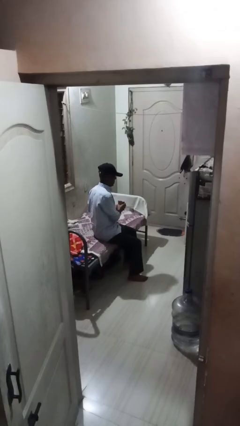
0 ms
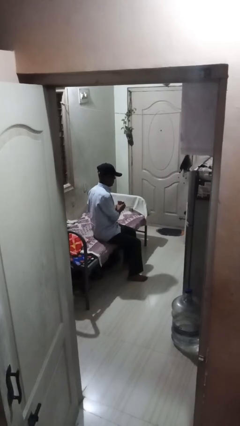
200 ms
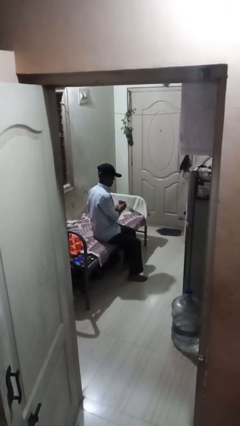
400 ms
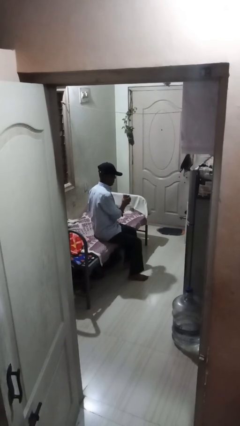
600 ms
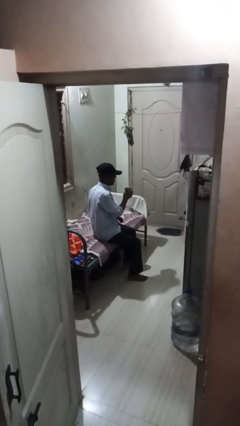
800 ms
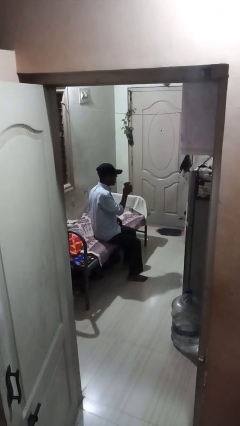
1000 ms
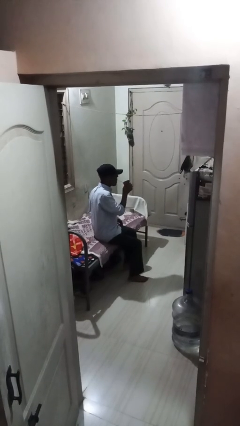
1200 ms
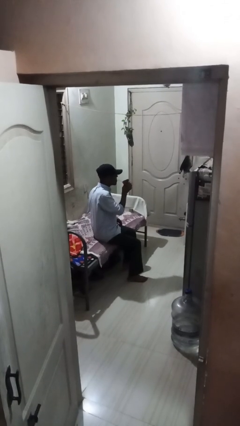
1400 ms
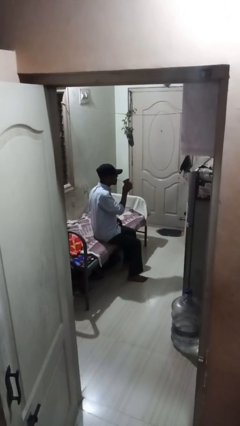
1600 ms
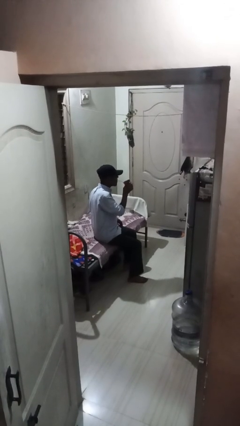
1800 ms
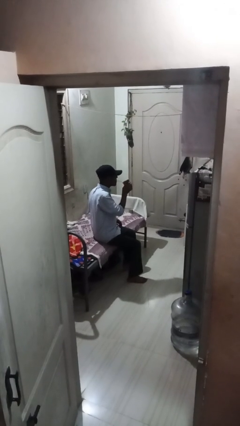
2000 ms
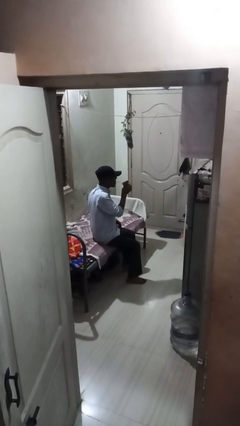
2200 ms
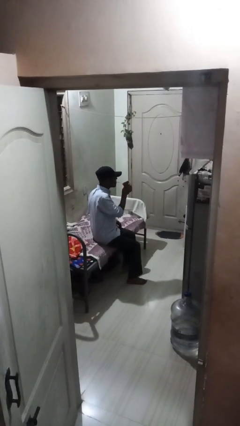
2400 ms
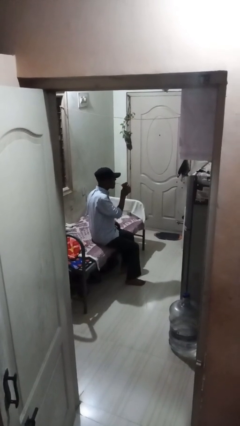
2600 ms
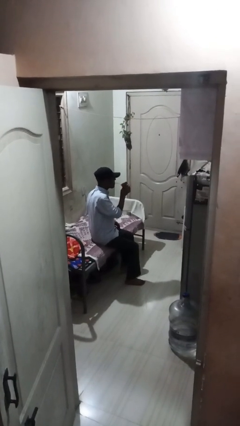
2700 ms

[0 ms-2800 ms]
person drinks from straw

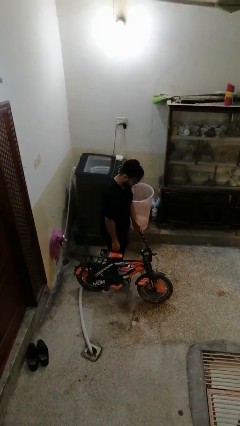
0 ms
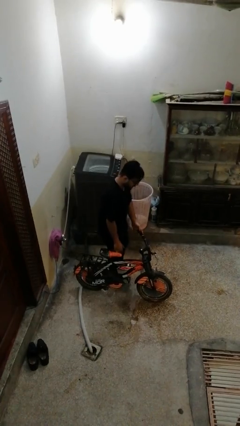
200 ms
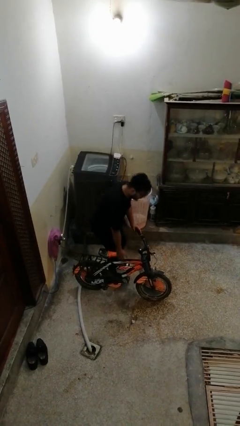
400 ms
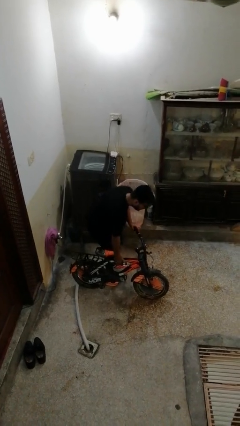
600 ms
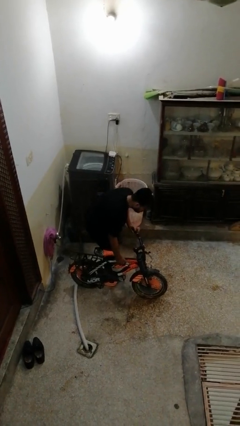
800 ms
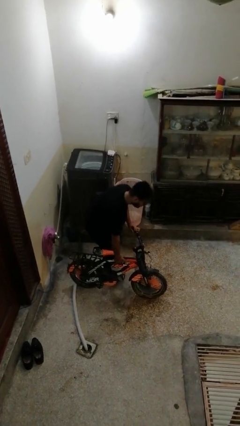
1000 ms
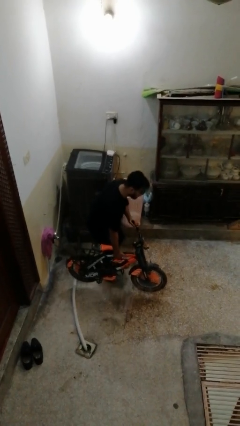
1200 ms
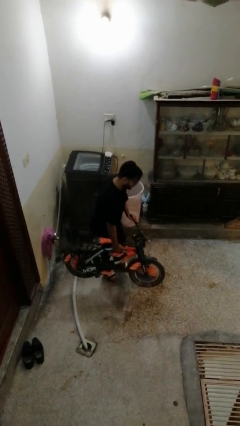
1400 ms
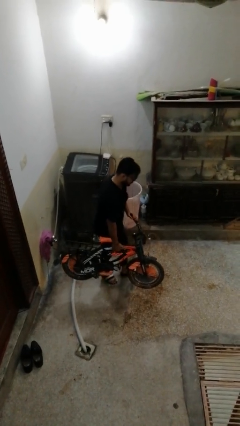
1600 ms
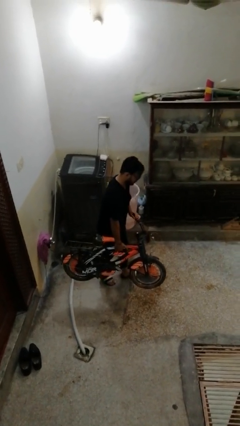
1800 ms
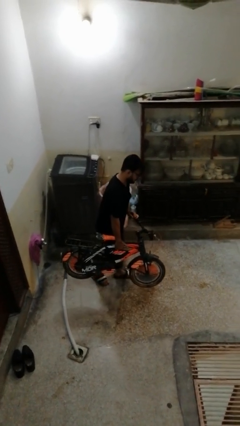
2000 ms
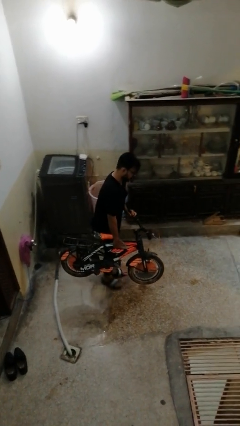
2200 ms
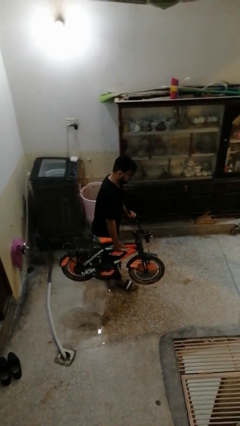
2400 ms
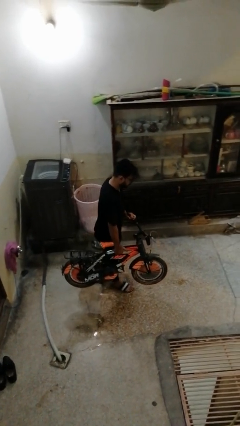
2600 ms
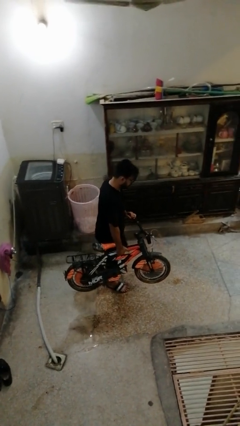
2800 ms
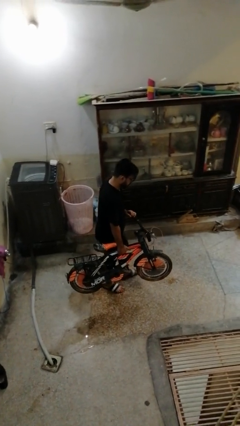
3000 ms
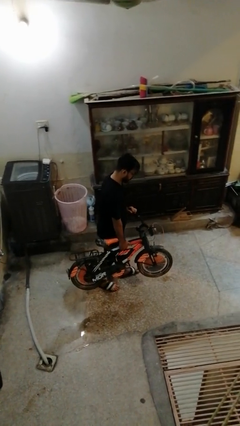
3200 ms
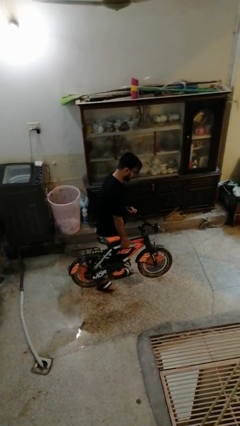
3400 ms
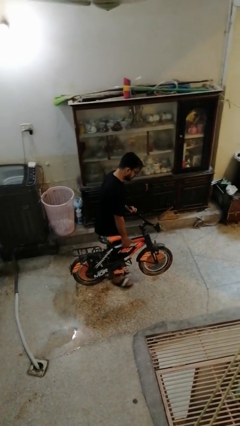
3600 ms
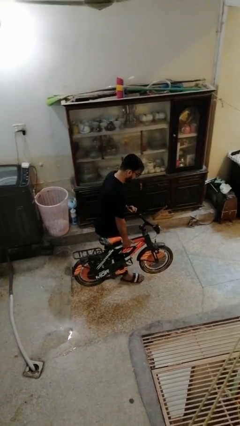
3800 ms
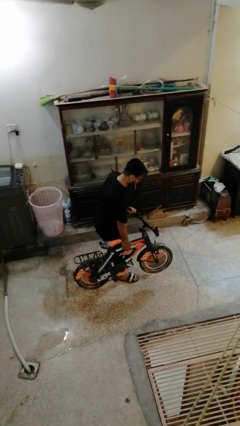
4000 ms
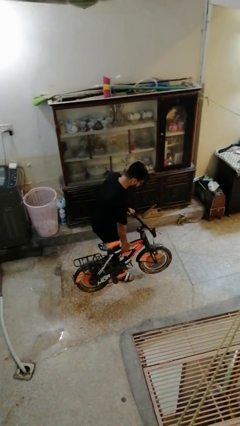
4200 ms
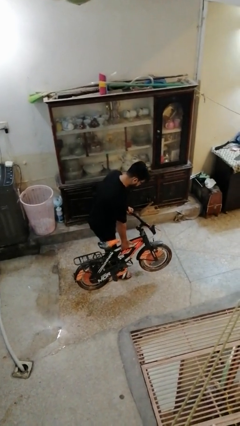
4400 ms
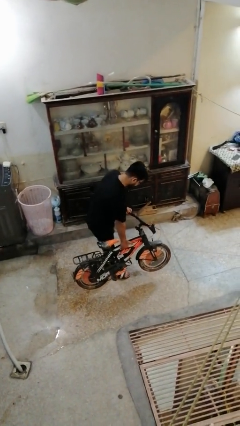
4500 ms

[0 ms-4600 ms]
person carries bicycle

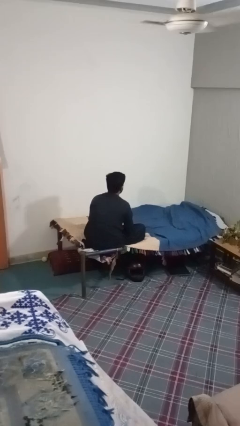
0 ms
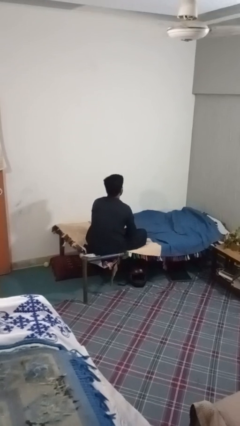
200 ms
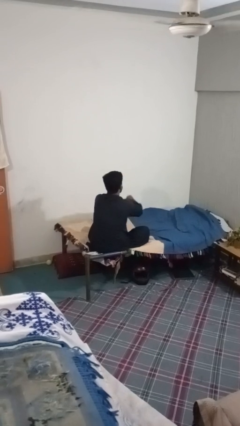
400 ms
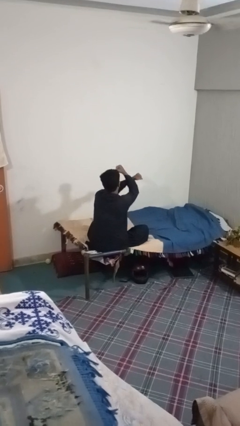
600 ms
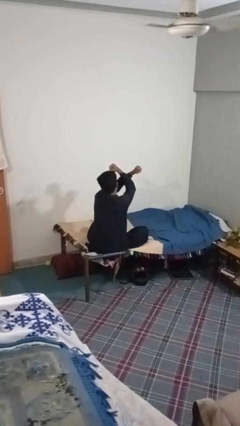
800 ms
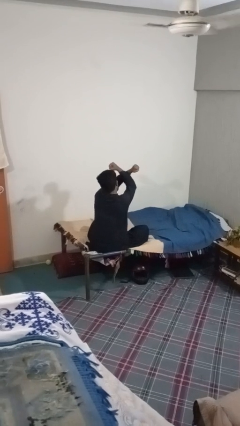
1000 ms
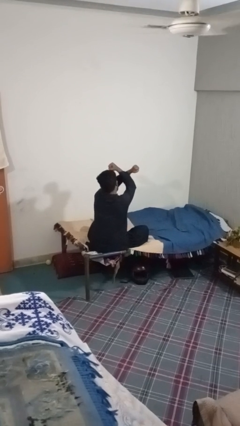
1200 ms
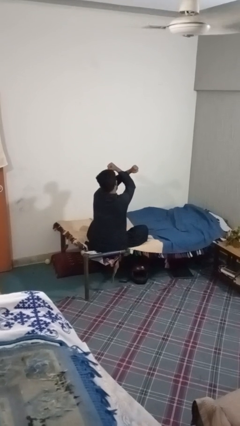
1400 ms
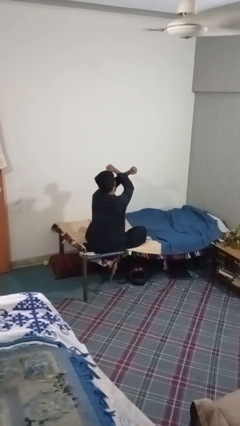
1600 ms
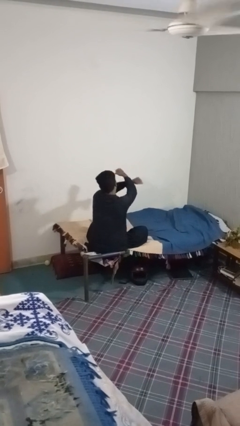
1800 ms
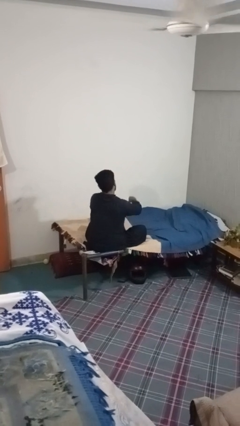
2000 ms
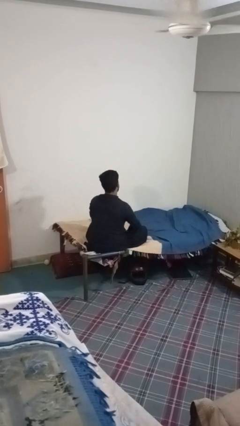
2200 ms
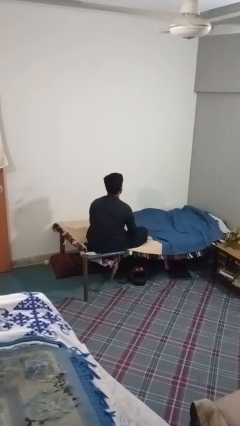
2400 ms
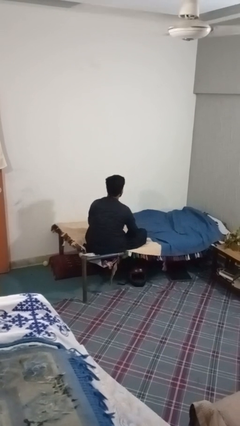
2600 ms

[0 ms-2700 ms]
person gestures arms x

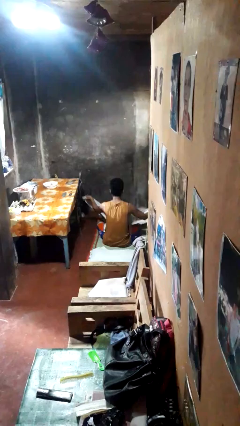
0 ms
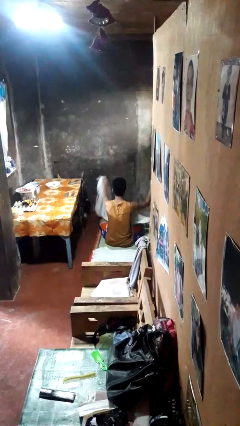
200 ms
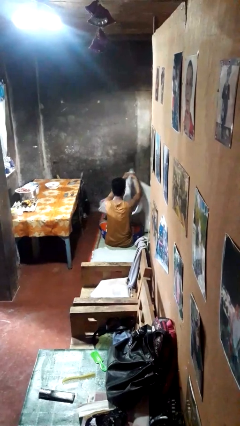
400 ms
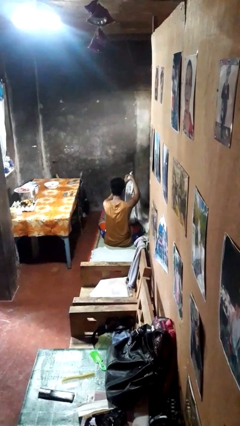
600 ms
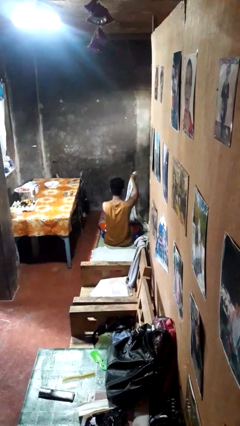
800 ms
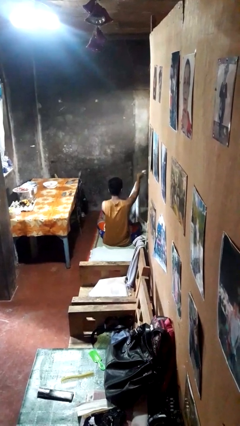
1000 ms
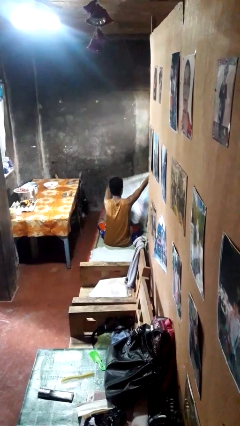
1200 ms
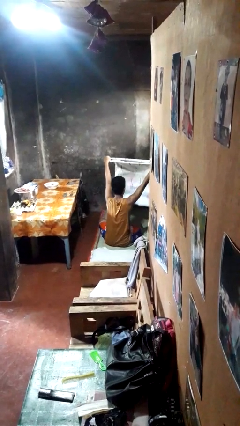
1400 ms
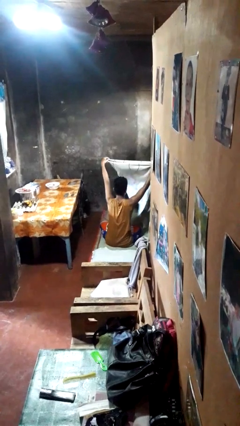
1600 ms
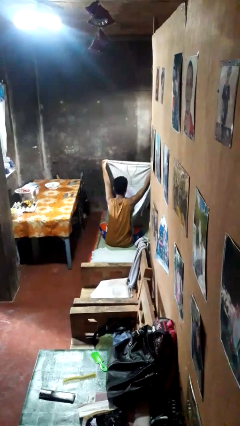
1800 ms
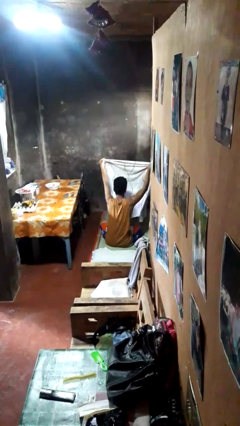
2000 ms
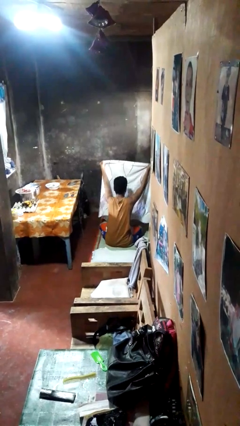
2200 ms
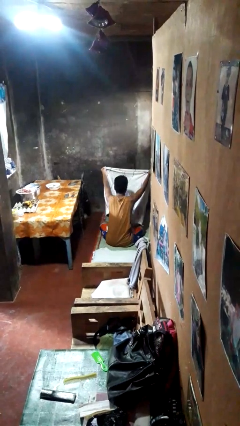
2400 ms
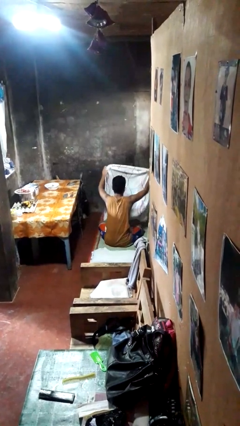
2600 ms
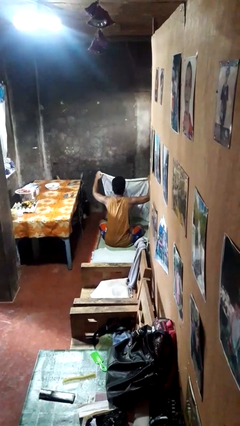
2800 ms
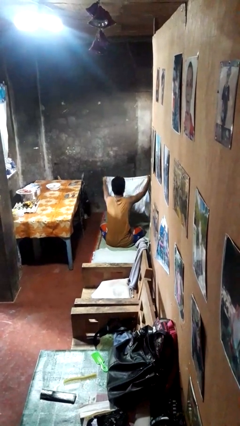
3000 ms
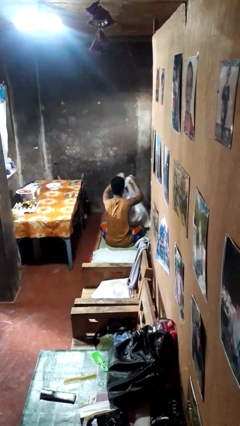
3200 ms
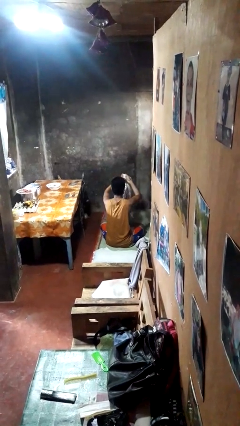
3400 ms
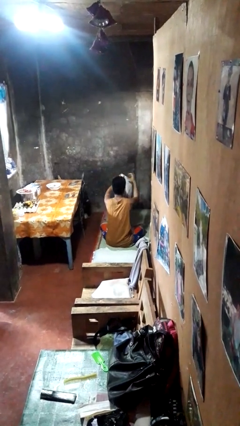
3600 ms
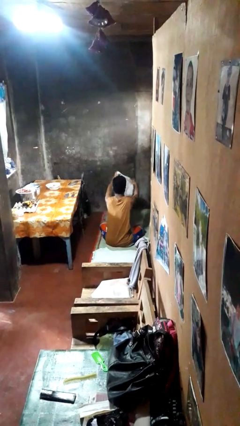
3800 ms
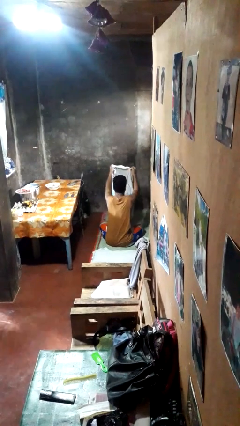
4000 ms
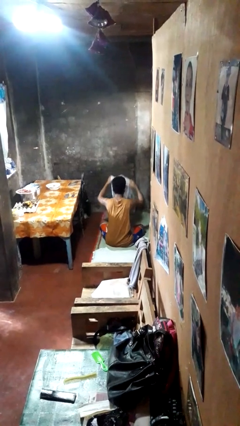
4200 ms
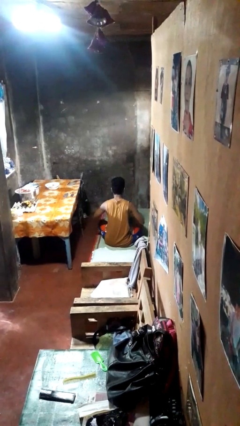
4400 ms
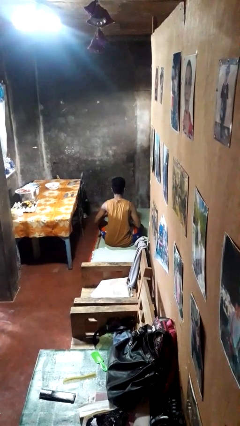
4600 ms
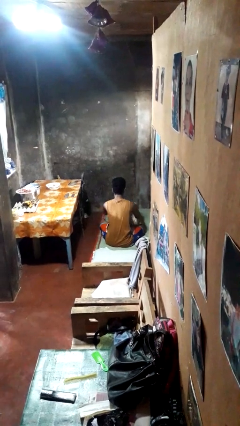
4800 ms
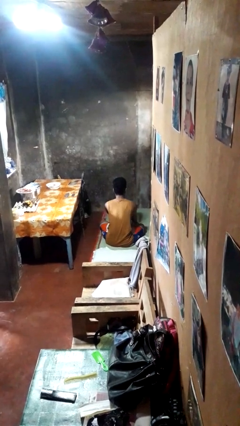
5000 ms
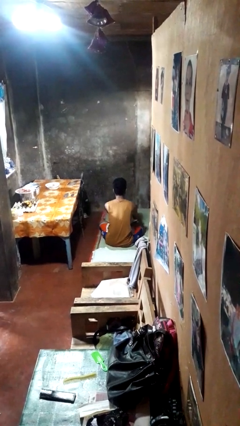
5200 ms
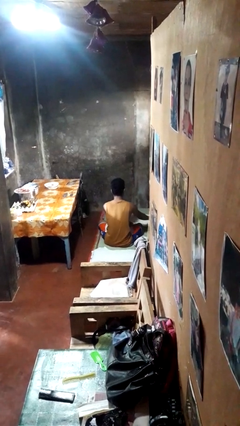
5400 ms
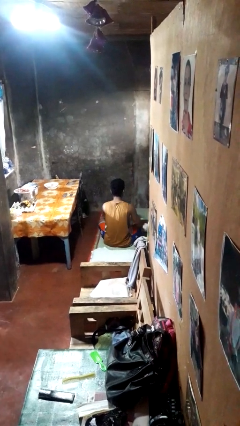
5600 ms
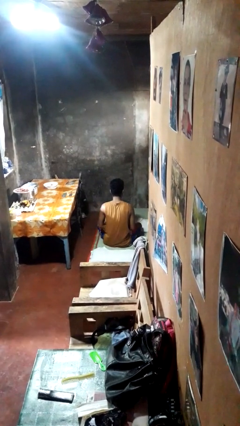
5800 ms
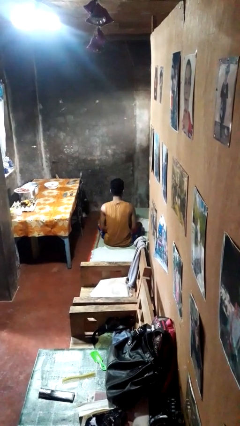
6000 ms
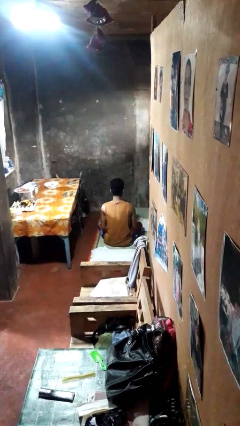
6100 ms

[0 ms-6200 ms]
person folds blanket

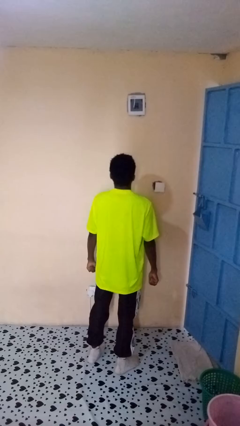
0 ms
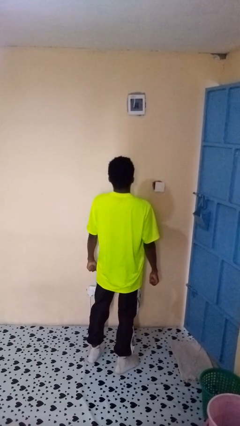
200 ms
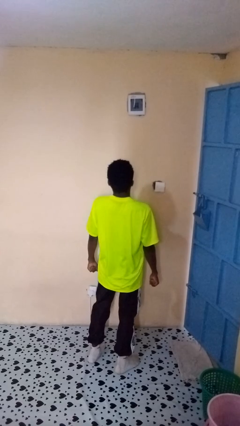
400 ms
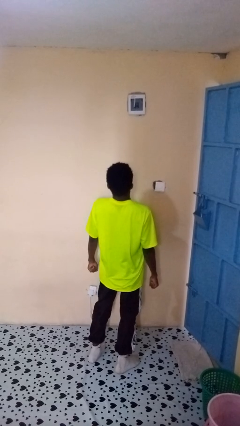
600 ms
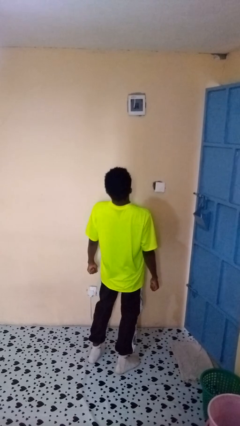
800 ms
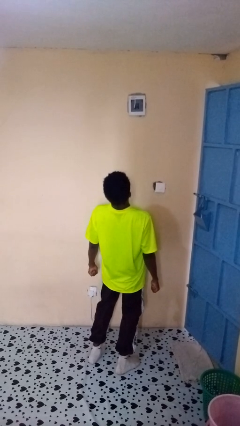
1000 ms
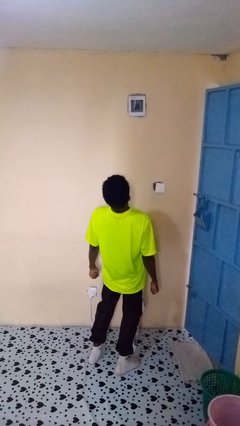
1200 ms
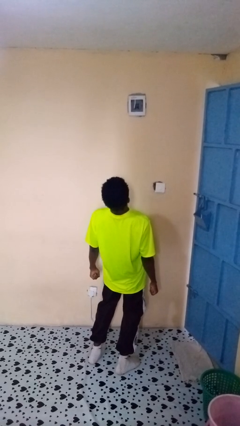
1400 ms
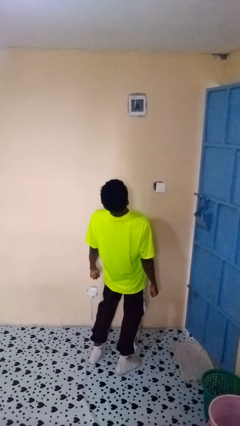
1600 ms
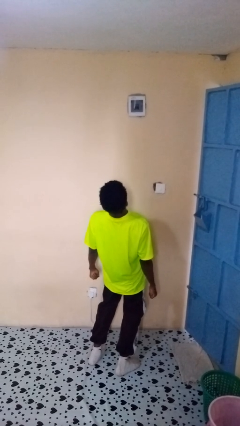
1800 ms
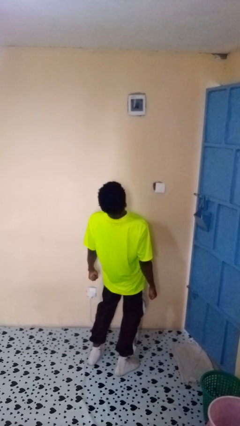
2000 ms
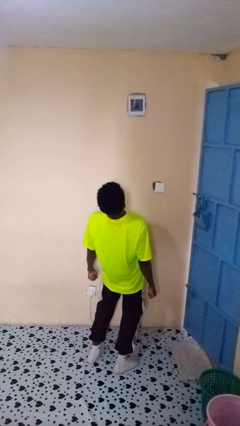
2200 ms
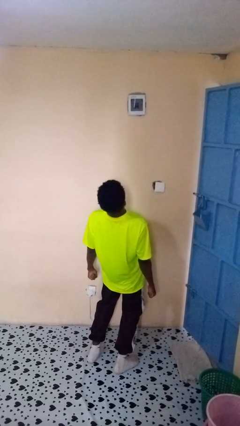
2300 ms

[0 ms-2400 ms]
person stretches back
